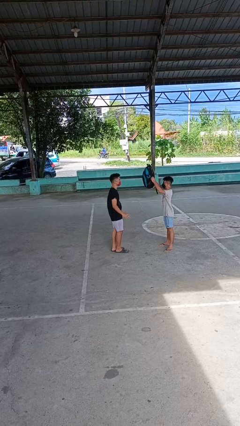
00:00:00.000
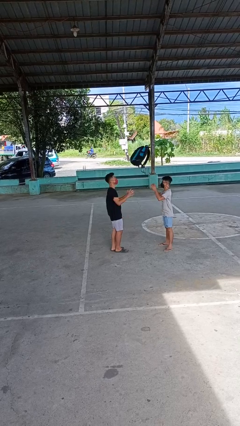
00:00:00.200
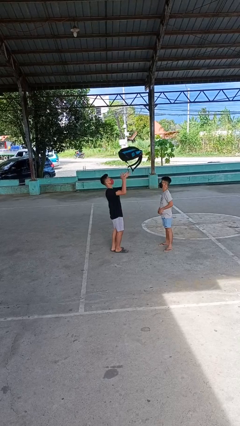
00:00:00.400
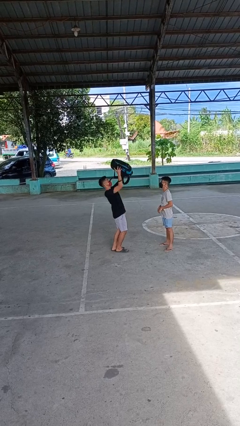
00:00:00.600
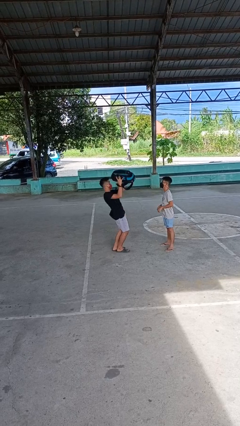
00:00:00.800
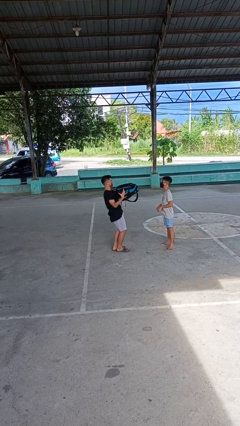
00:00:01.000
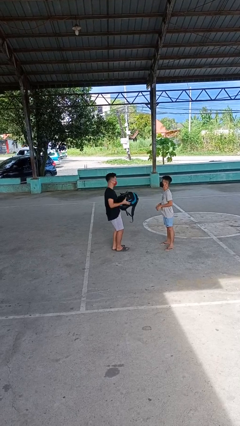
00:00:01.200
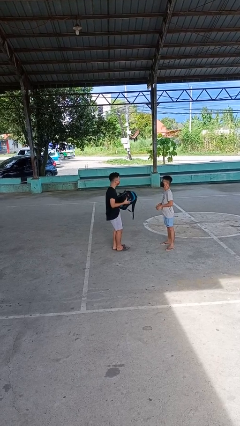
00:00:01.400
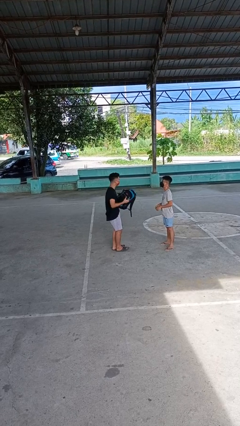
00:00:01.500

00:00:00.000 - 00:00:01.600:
person catches object from person

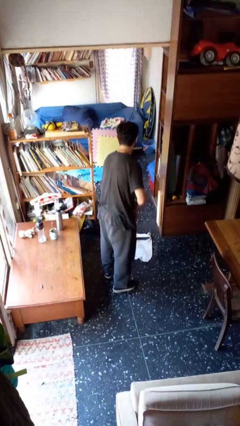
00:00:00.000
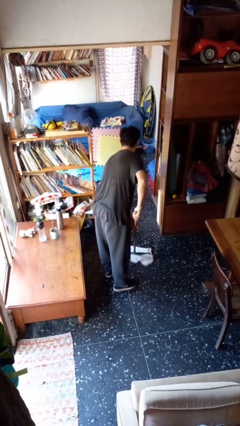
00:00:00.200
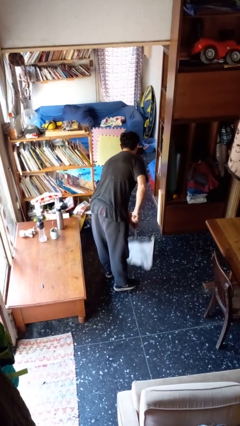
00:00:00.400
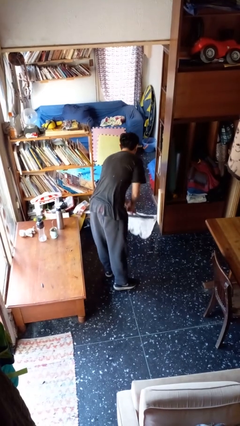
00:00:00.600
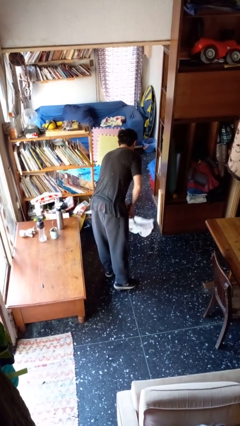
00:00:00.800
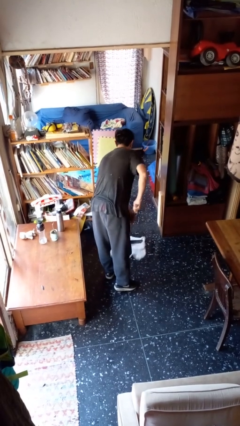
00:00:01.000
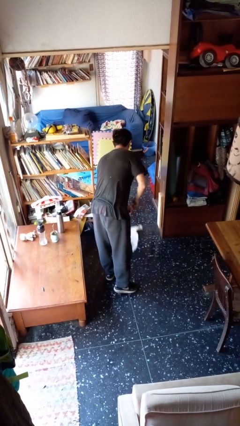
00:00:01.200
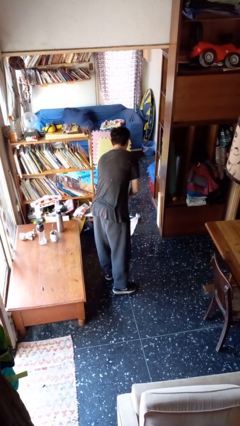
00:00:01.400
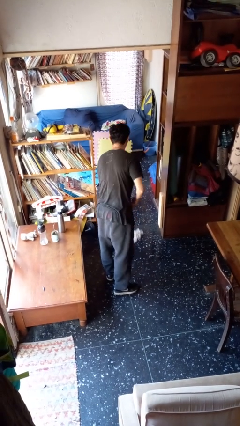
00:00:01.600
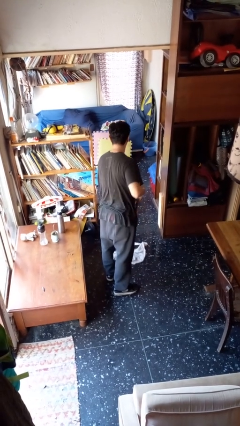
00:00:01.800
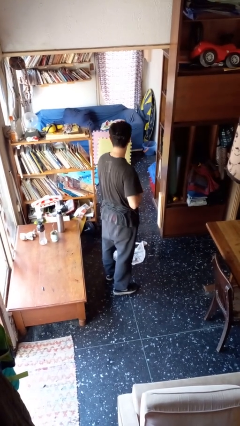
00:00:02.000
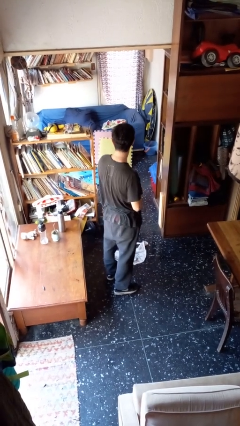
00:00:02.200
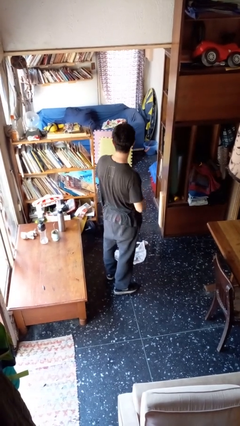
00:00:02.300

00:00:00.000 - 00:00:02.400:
person mops

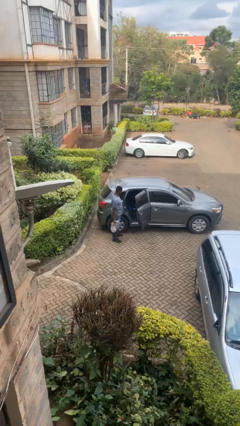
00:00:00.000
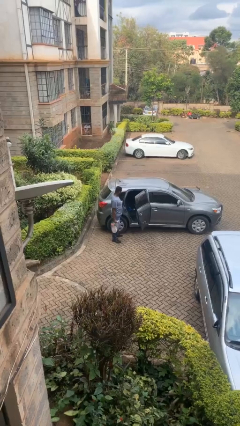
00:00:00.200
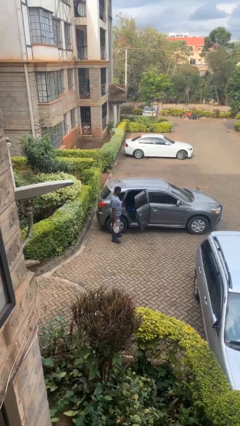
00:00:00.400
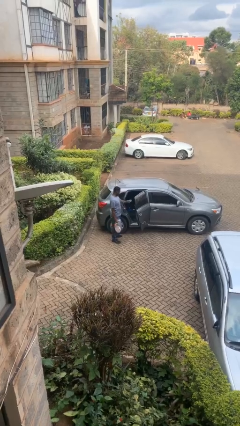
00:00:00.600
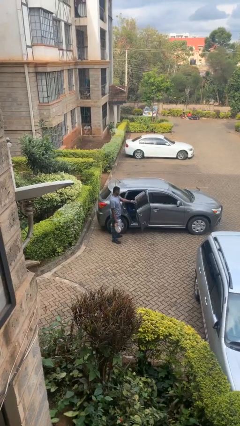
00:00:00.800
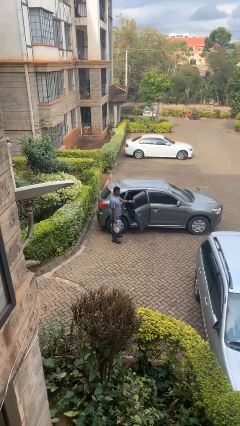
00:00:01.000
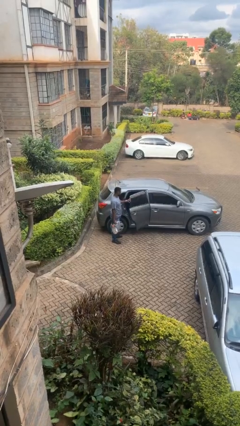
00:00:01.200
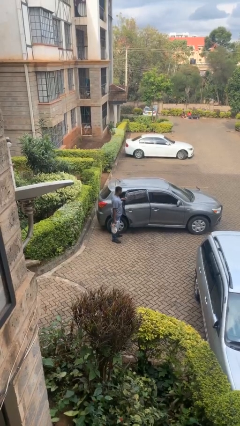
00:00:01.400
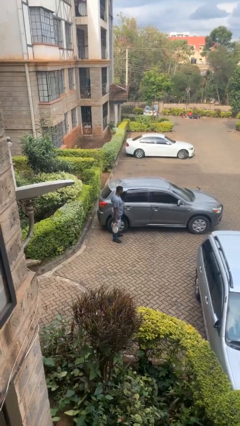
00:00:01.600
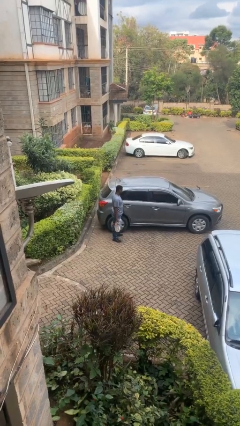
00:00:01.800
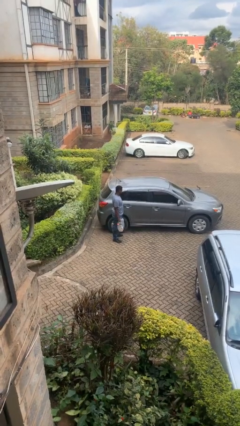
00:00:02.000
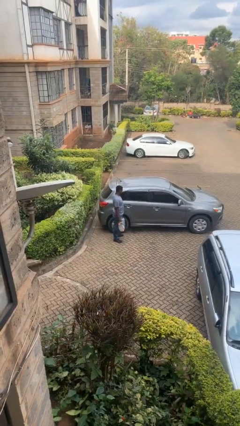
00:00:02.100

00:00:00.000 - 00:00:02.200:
person closes car door

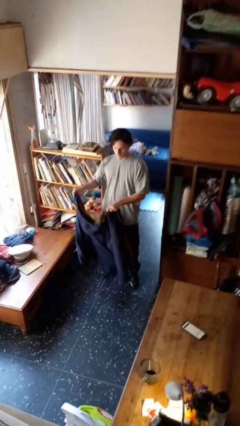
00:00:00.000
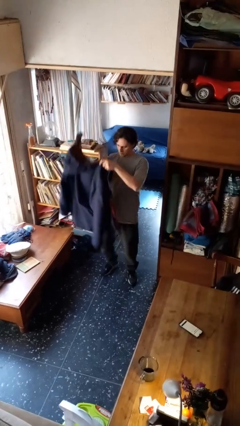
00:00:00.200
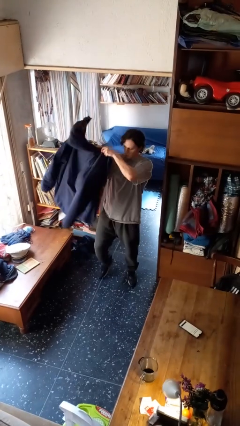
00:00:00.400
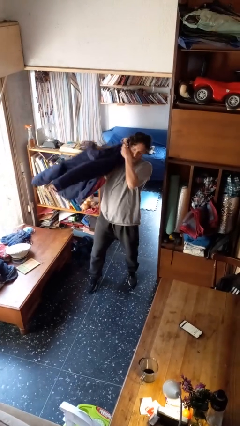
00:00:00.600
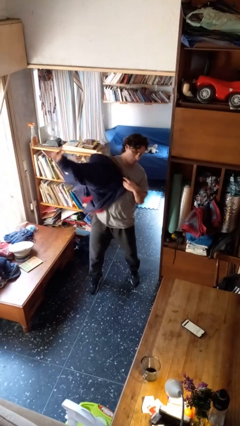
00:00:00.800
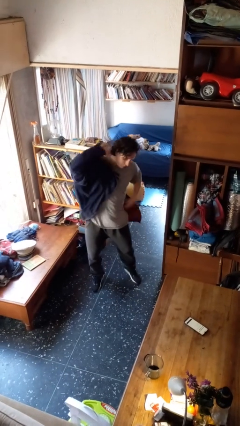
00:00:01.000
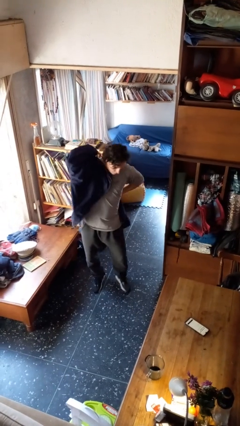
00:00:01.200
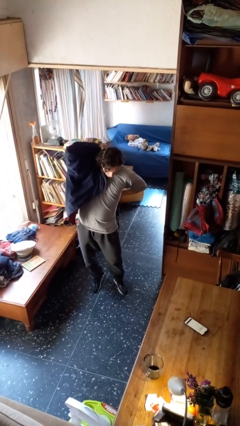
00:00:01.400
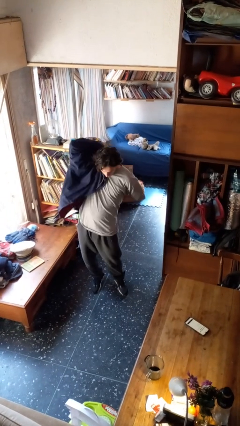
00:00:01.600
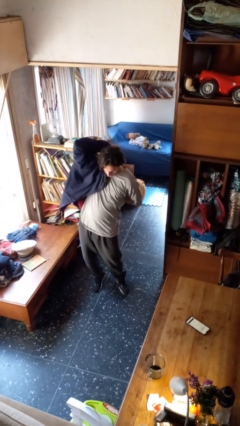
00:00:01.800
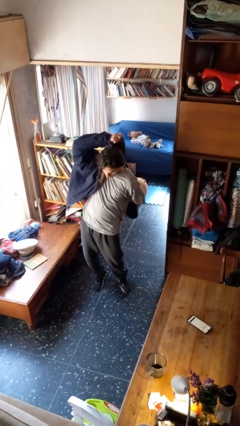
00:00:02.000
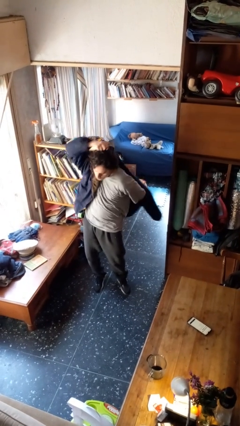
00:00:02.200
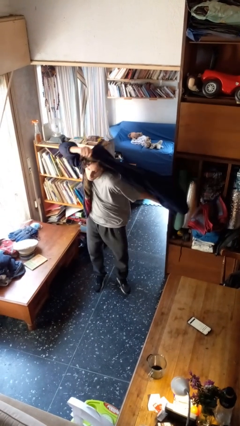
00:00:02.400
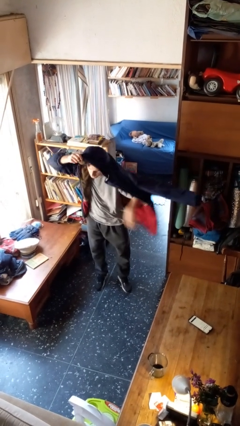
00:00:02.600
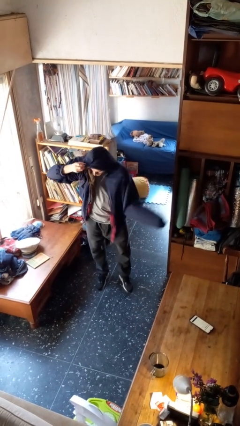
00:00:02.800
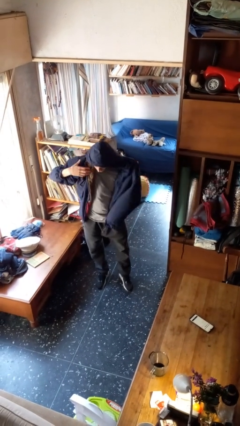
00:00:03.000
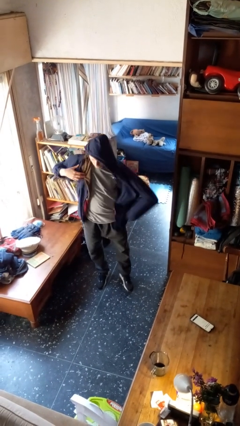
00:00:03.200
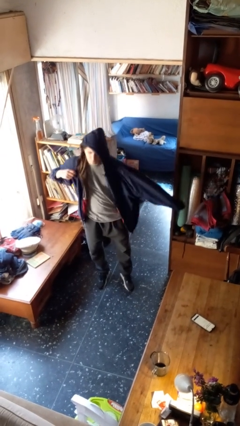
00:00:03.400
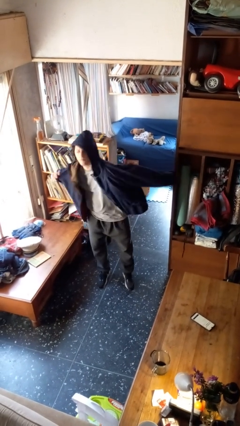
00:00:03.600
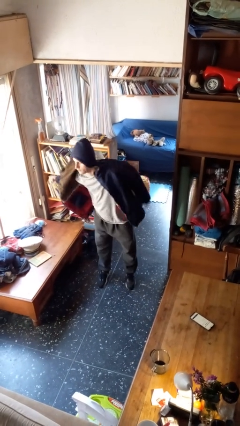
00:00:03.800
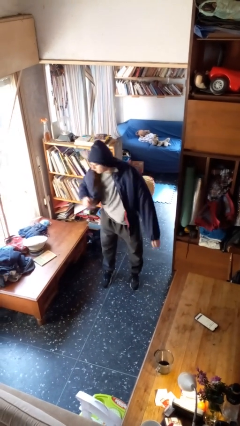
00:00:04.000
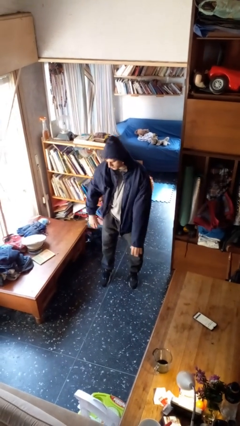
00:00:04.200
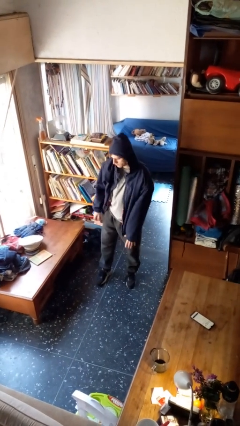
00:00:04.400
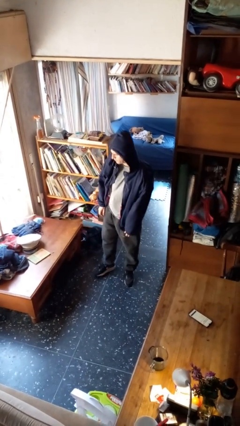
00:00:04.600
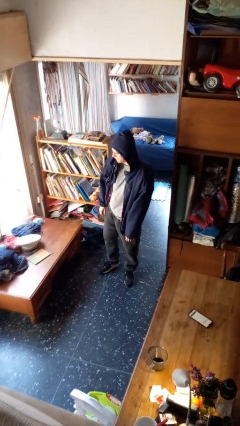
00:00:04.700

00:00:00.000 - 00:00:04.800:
person puts on hoodie

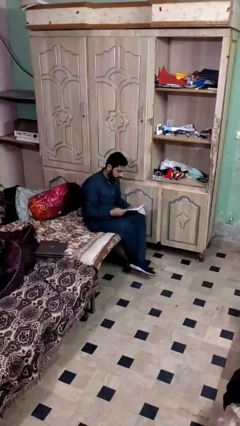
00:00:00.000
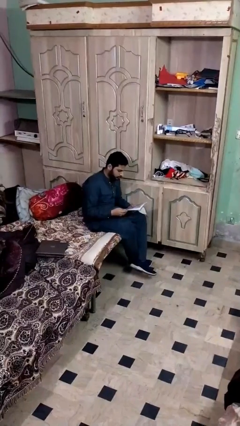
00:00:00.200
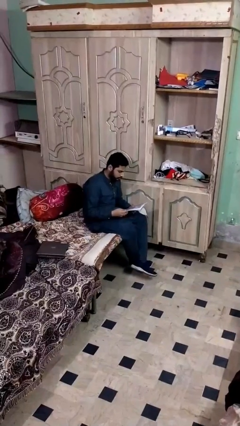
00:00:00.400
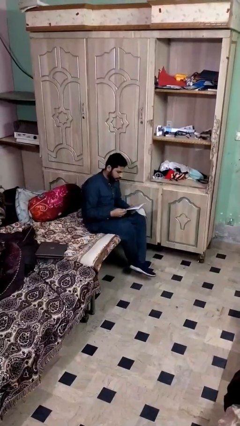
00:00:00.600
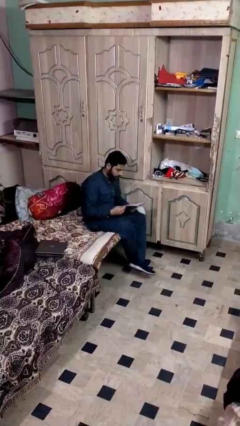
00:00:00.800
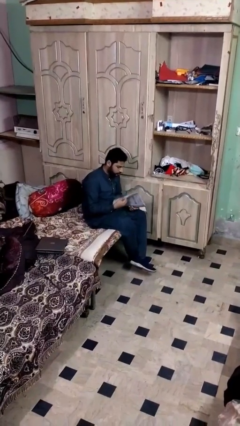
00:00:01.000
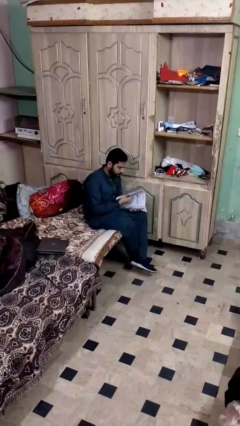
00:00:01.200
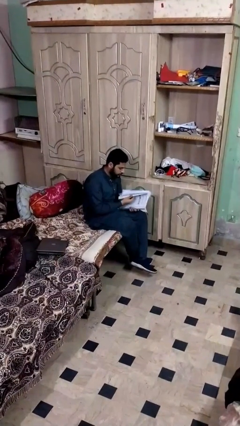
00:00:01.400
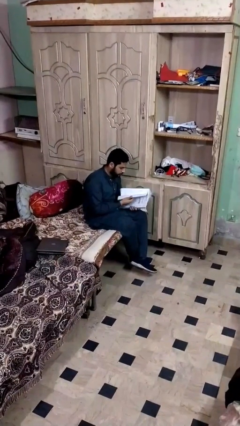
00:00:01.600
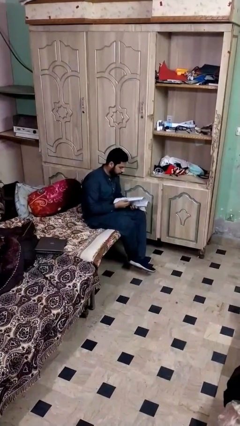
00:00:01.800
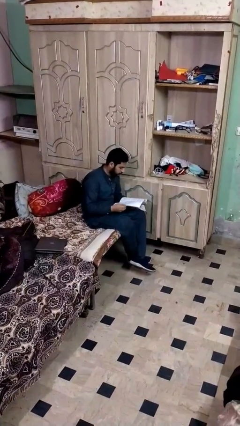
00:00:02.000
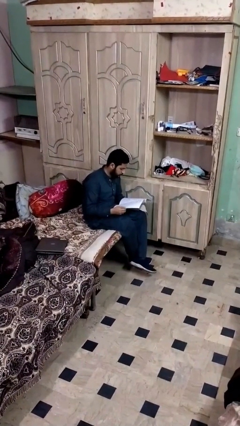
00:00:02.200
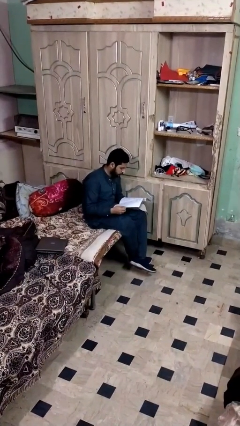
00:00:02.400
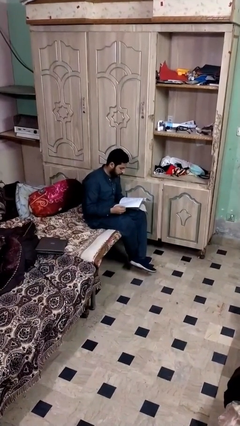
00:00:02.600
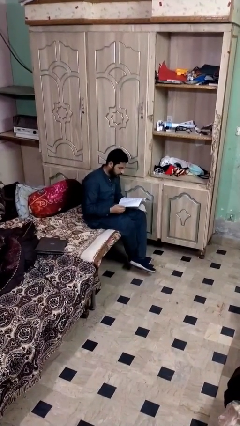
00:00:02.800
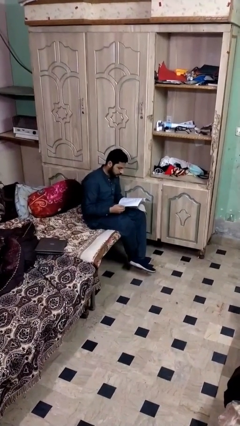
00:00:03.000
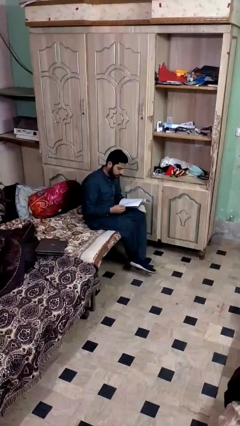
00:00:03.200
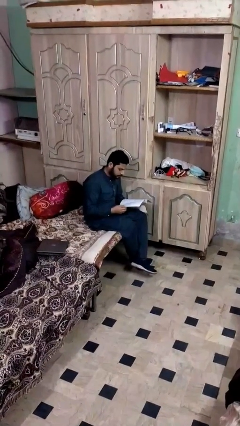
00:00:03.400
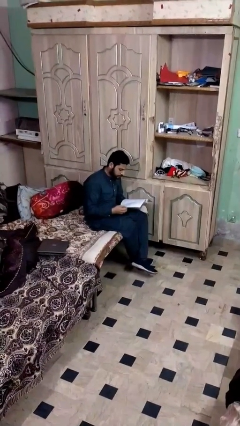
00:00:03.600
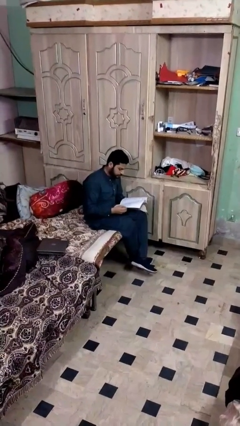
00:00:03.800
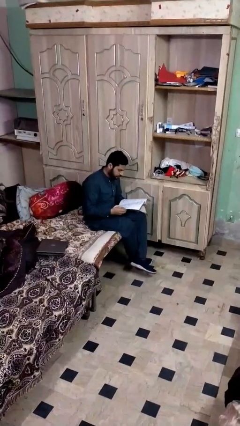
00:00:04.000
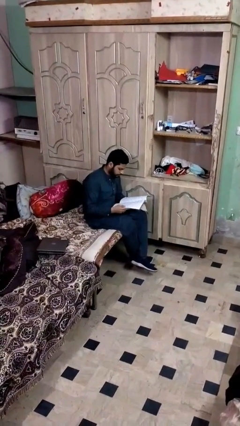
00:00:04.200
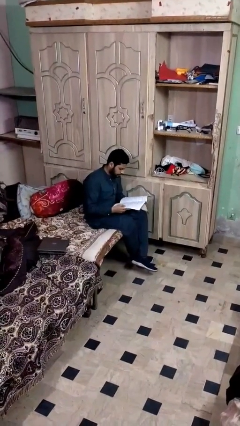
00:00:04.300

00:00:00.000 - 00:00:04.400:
person reads document

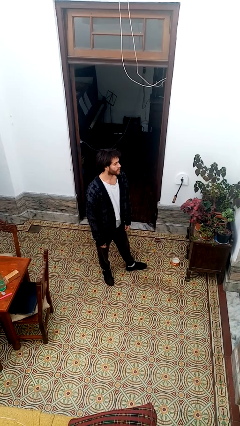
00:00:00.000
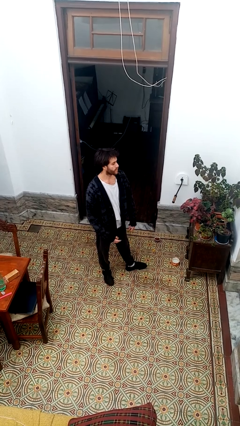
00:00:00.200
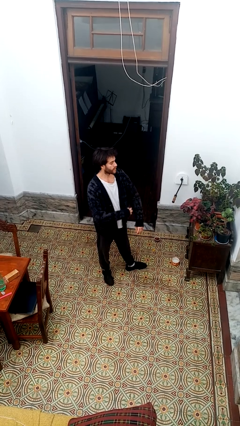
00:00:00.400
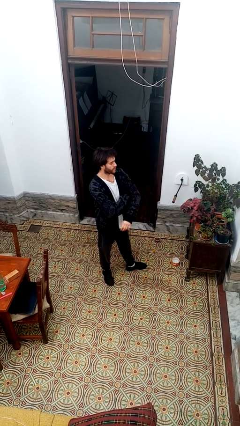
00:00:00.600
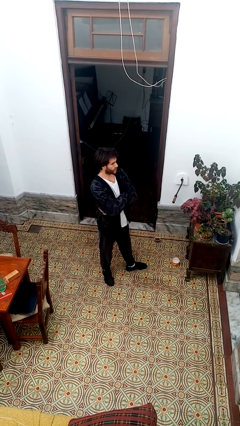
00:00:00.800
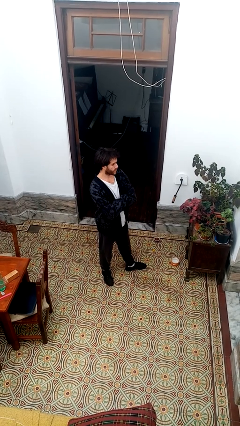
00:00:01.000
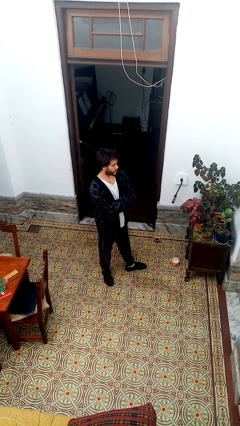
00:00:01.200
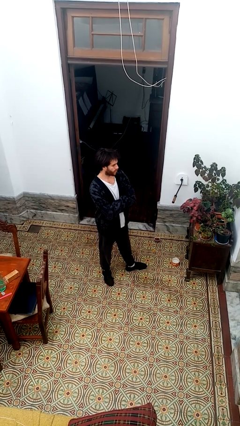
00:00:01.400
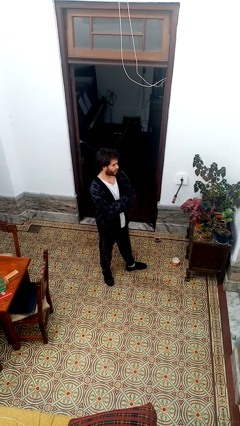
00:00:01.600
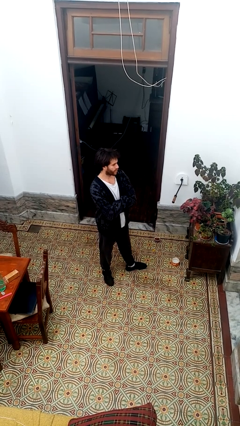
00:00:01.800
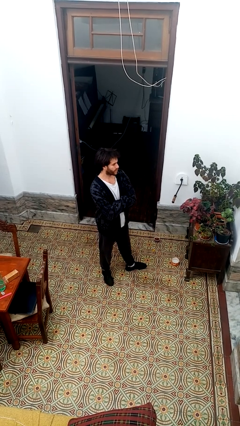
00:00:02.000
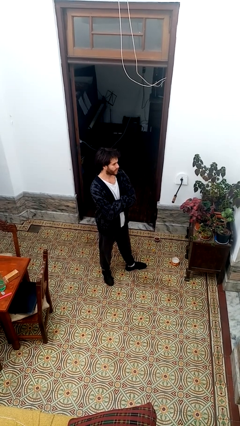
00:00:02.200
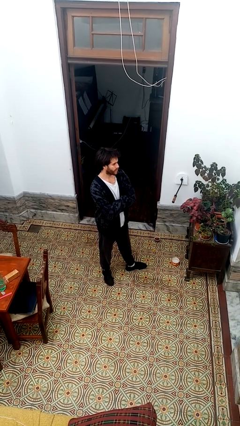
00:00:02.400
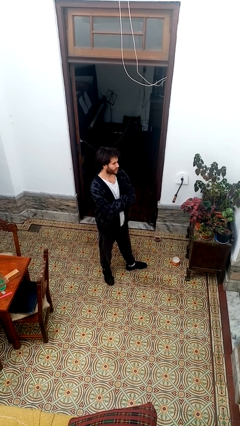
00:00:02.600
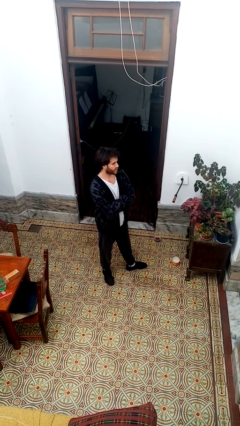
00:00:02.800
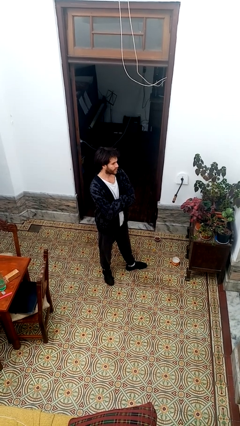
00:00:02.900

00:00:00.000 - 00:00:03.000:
person crosses arms
